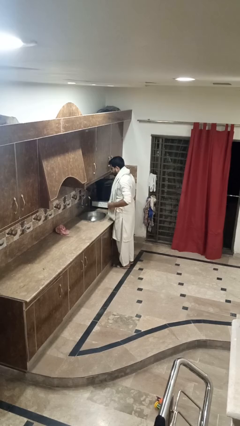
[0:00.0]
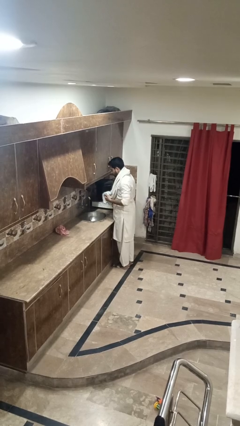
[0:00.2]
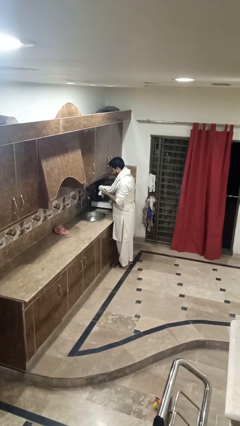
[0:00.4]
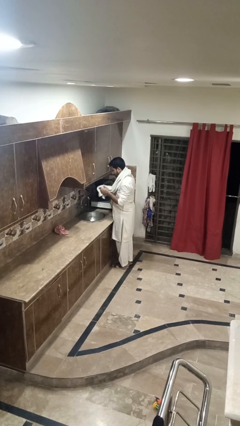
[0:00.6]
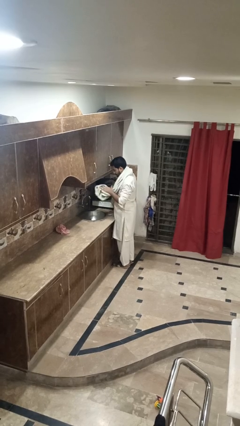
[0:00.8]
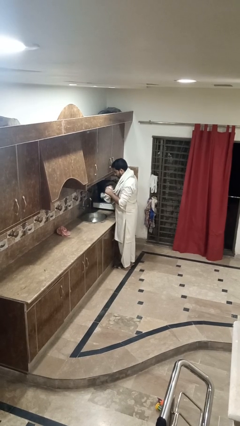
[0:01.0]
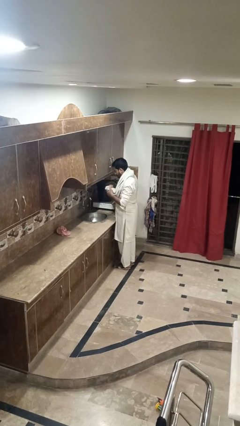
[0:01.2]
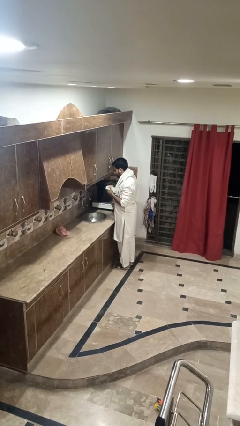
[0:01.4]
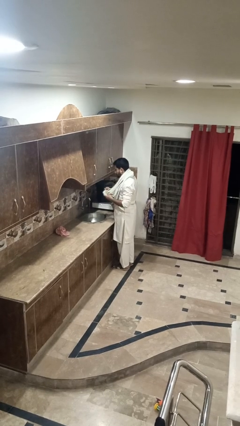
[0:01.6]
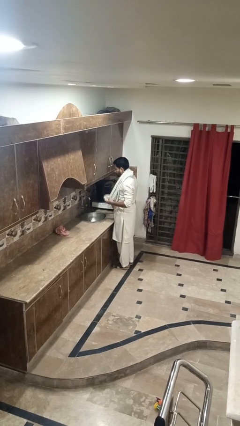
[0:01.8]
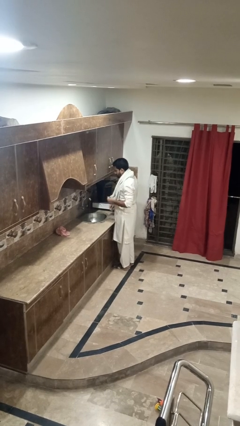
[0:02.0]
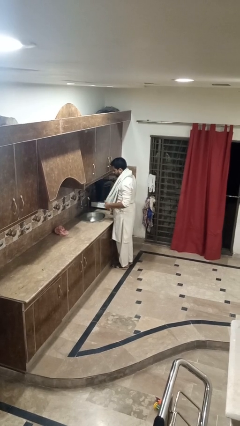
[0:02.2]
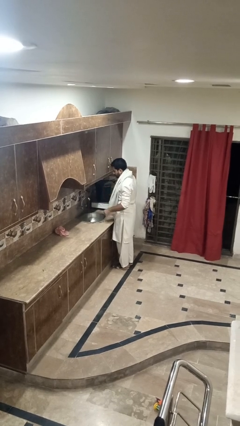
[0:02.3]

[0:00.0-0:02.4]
person dries hands with towel

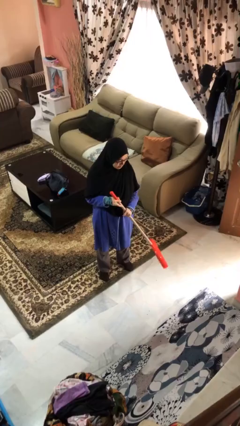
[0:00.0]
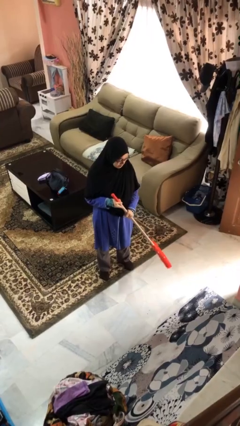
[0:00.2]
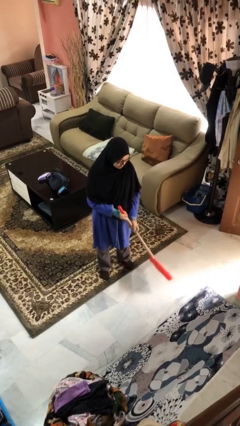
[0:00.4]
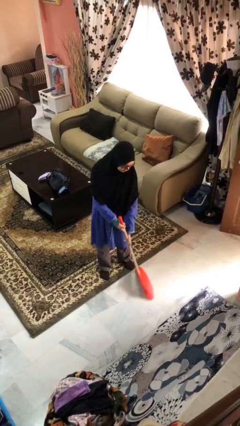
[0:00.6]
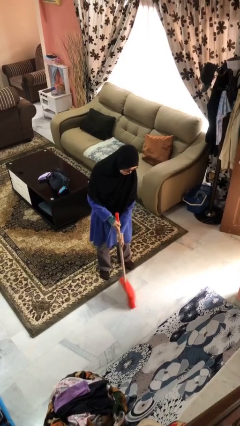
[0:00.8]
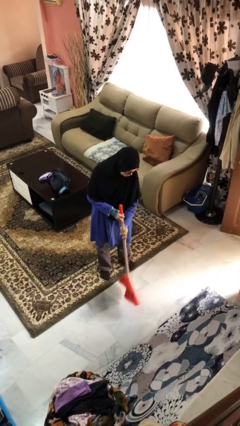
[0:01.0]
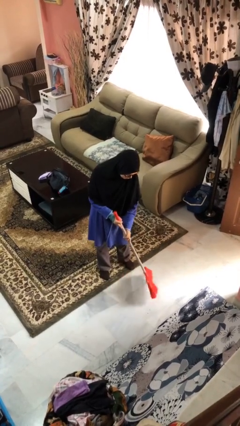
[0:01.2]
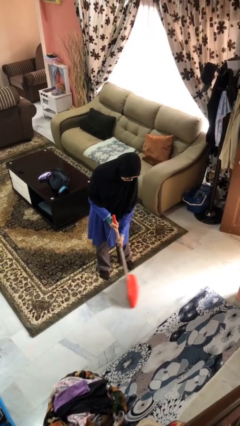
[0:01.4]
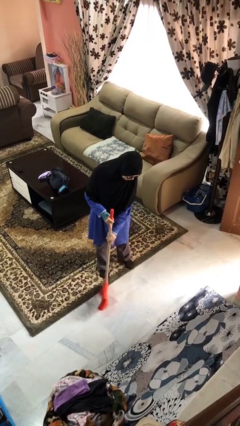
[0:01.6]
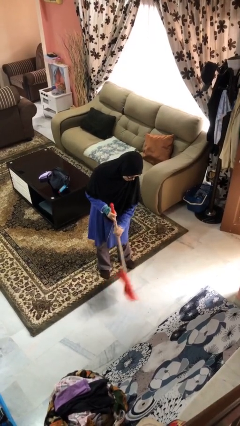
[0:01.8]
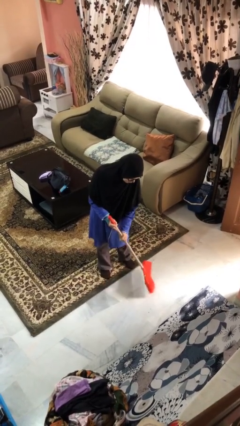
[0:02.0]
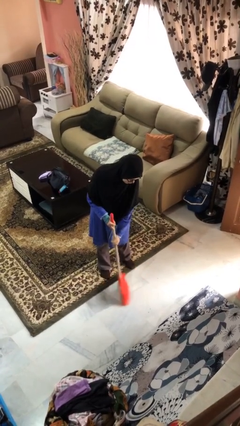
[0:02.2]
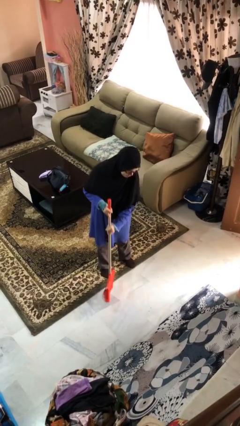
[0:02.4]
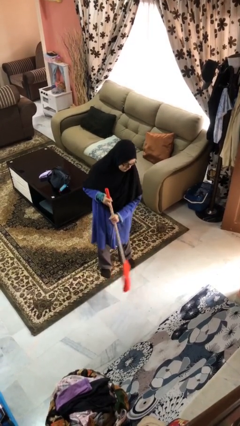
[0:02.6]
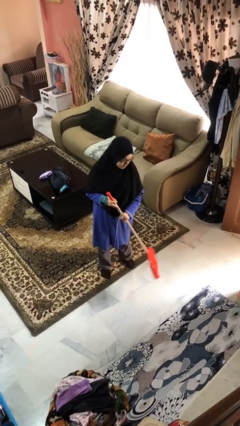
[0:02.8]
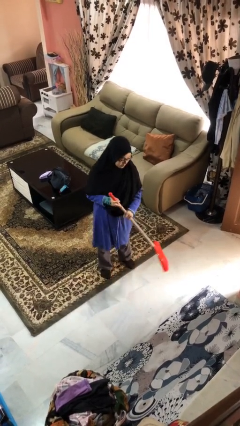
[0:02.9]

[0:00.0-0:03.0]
person sweeps floor

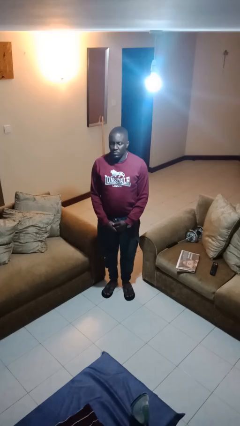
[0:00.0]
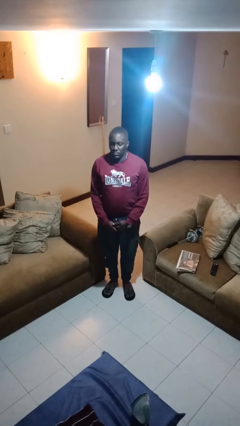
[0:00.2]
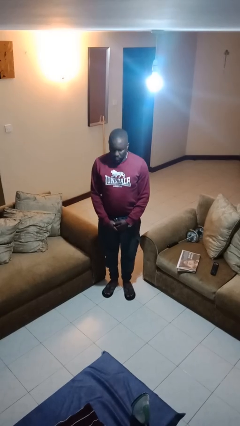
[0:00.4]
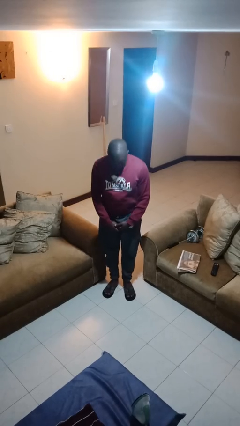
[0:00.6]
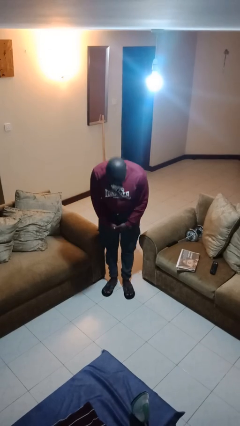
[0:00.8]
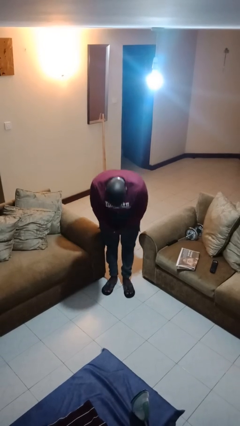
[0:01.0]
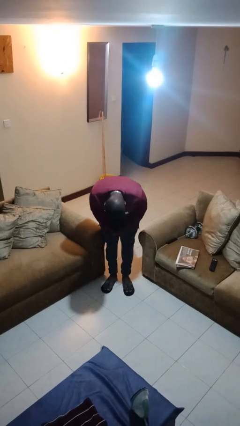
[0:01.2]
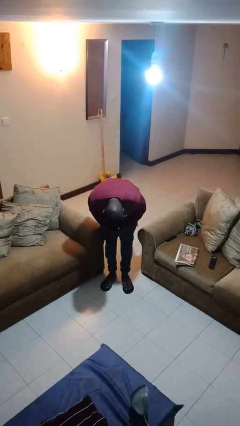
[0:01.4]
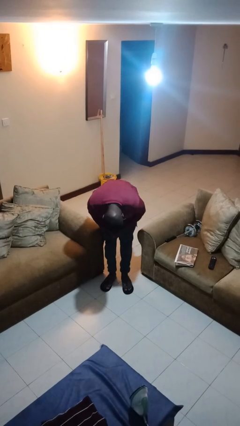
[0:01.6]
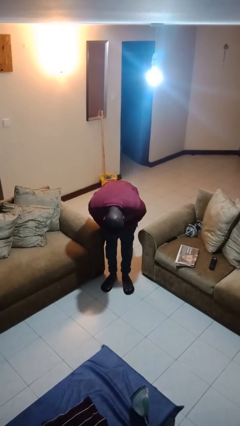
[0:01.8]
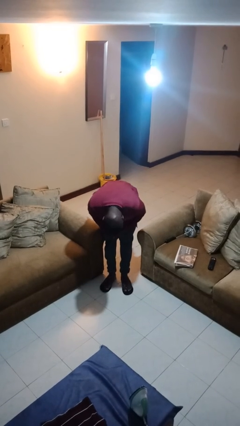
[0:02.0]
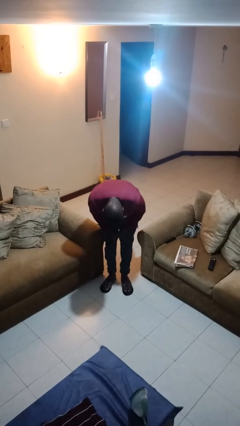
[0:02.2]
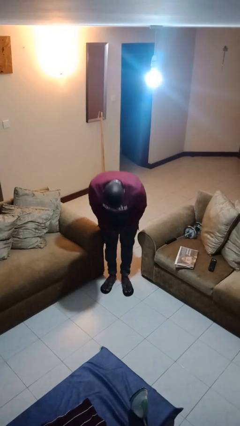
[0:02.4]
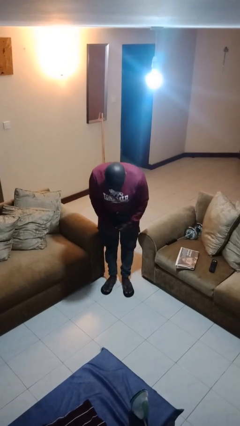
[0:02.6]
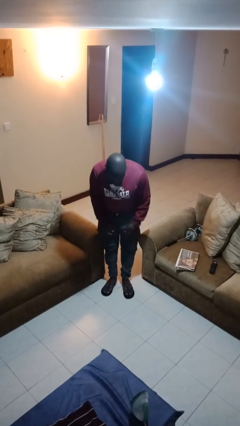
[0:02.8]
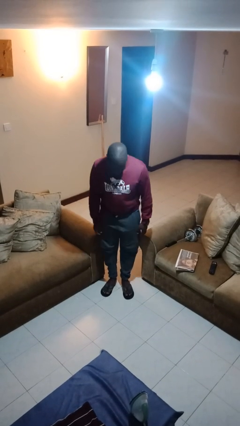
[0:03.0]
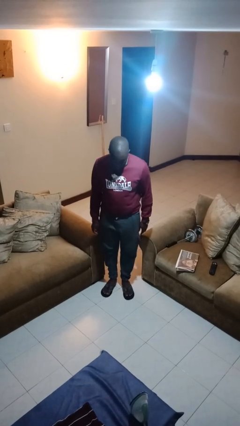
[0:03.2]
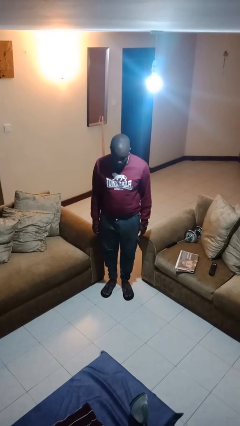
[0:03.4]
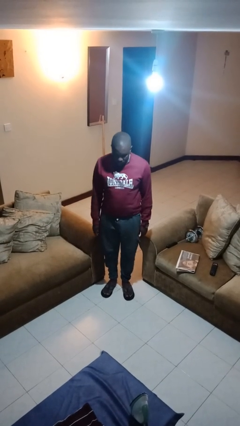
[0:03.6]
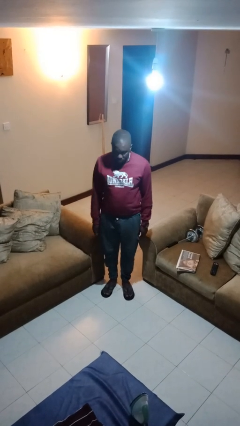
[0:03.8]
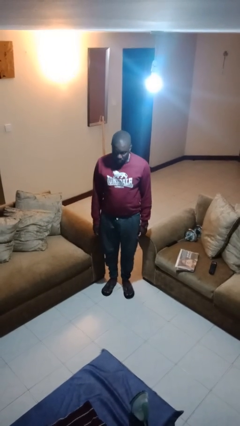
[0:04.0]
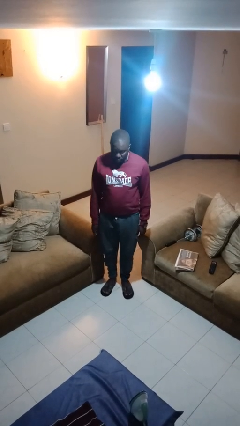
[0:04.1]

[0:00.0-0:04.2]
person bows

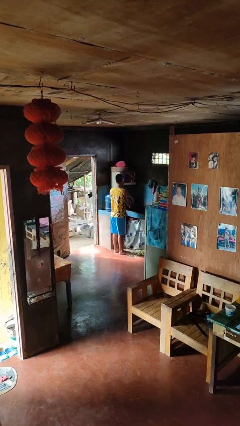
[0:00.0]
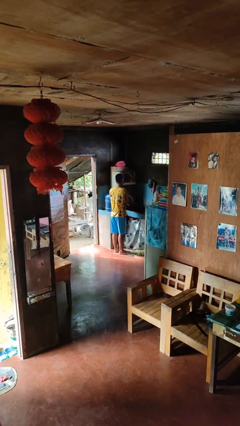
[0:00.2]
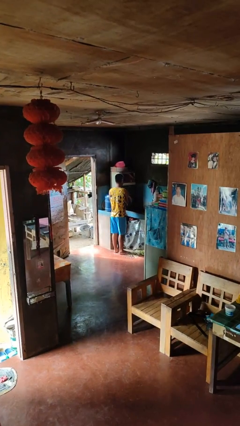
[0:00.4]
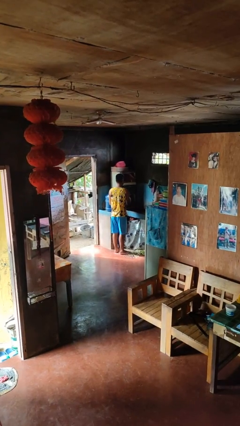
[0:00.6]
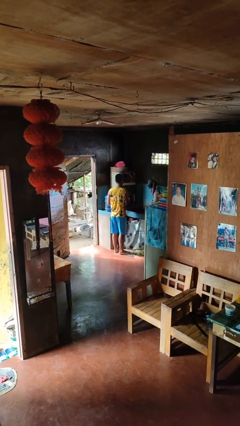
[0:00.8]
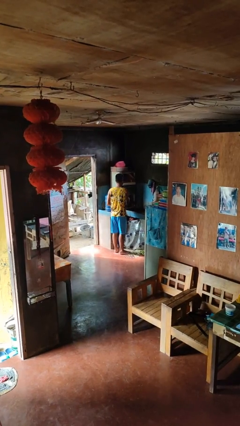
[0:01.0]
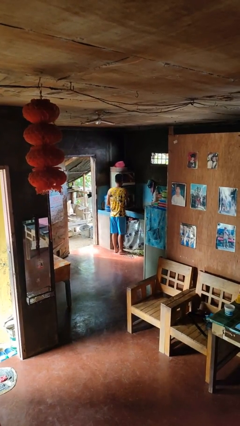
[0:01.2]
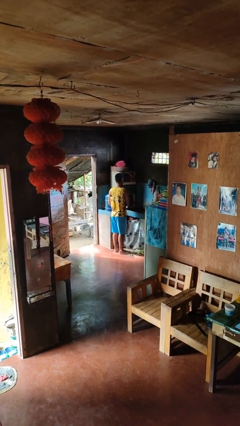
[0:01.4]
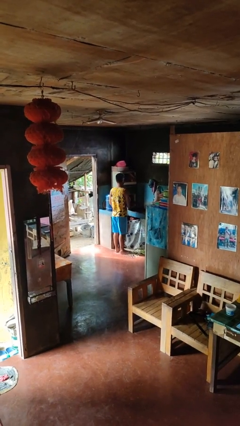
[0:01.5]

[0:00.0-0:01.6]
person closes dishwasher

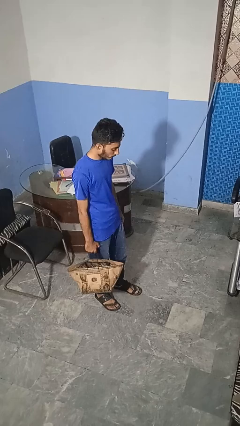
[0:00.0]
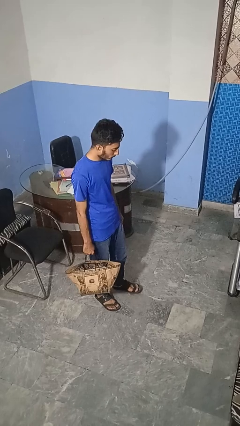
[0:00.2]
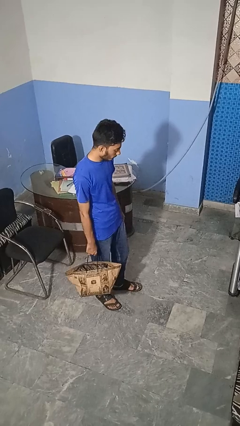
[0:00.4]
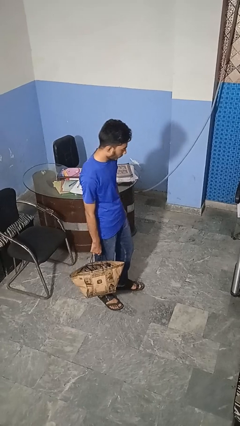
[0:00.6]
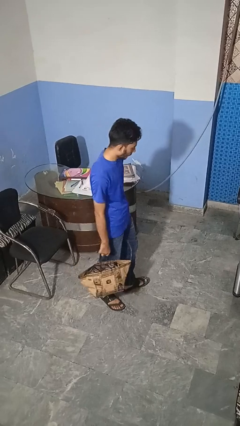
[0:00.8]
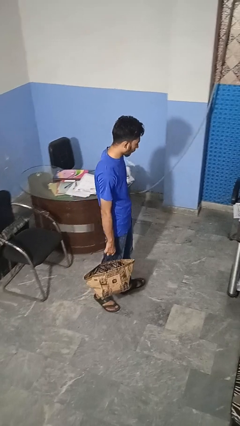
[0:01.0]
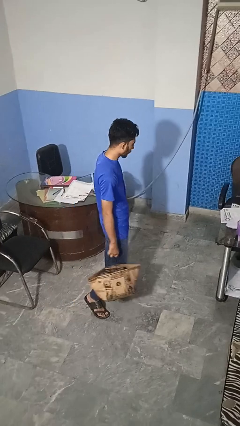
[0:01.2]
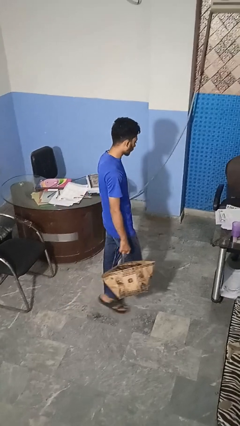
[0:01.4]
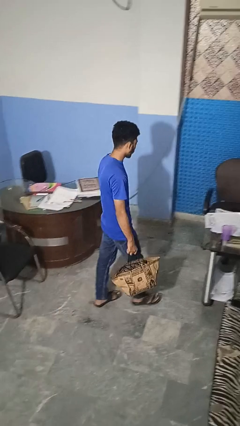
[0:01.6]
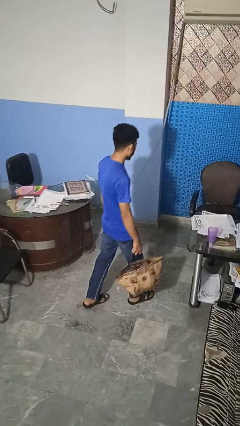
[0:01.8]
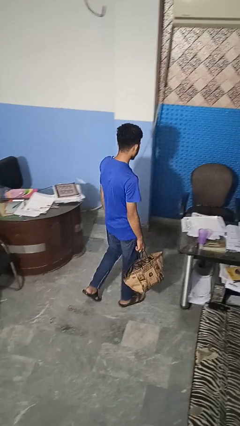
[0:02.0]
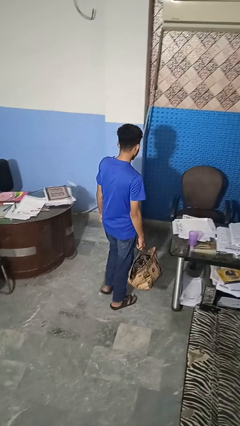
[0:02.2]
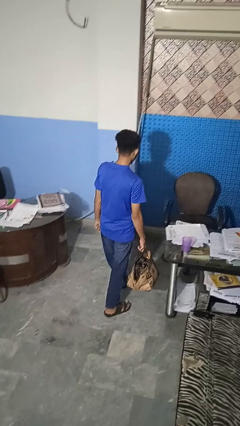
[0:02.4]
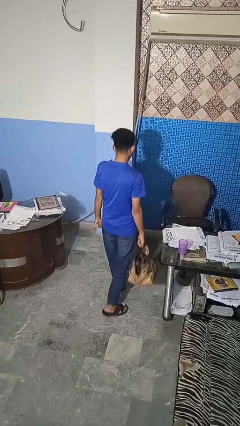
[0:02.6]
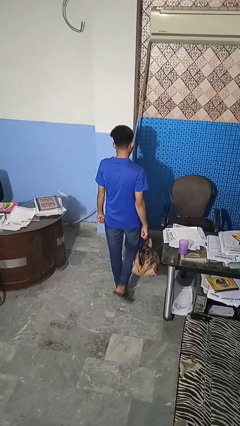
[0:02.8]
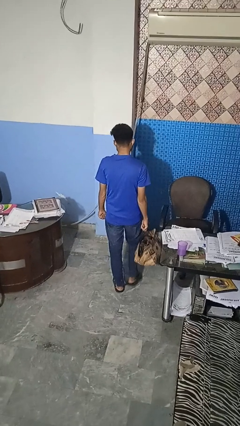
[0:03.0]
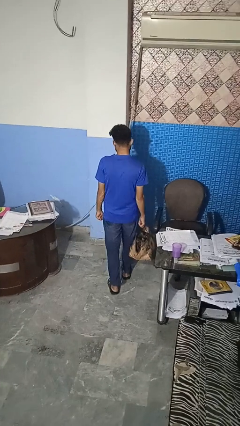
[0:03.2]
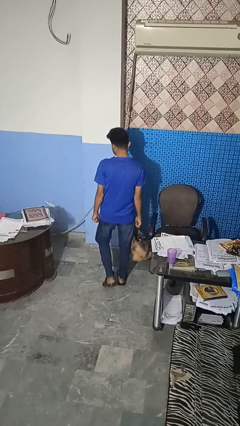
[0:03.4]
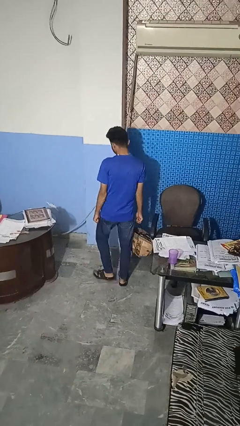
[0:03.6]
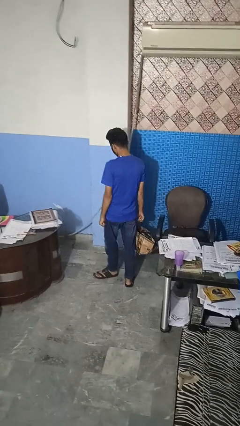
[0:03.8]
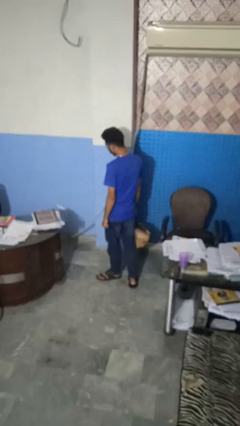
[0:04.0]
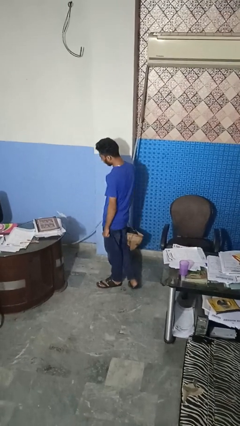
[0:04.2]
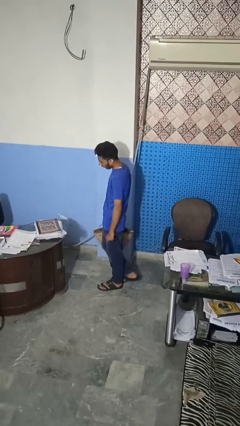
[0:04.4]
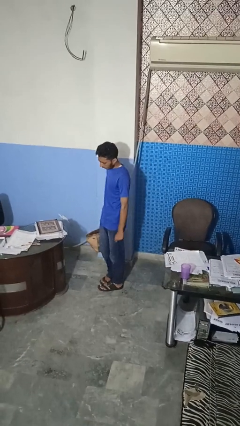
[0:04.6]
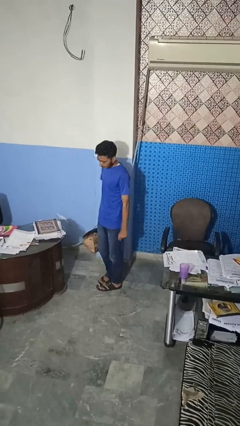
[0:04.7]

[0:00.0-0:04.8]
person carries groceries

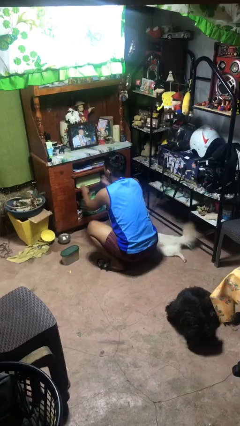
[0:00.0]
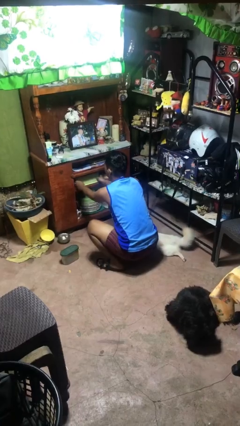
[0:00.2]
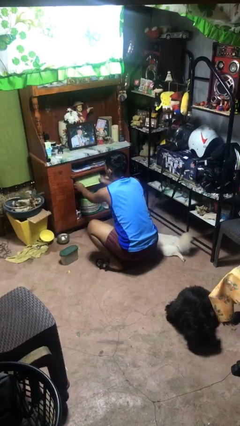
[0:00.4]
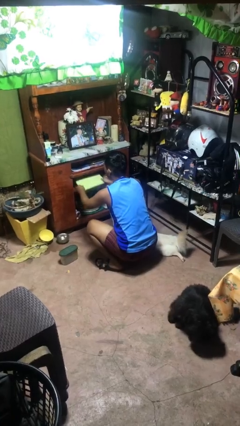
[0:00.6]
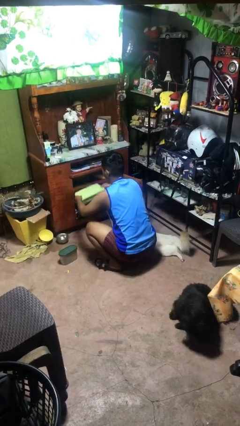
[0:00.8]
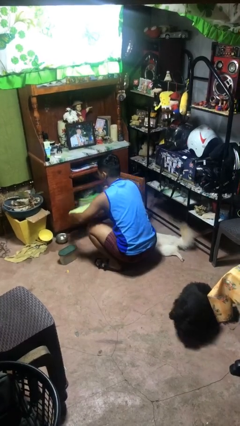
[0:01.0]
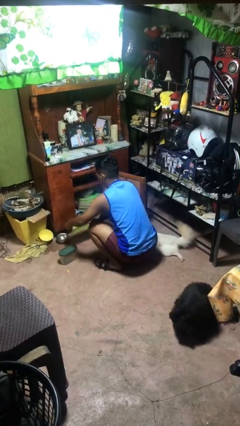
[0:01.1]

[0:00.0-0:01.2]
person takes object from cabinet

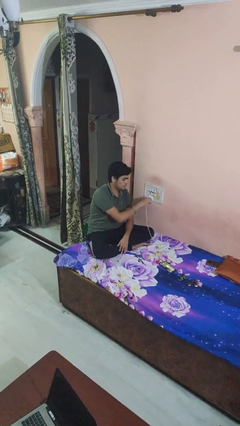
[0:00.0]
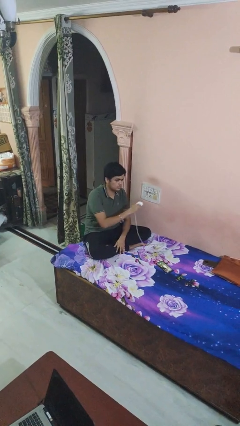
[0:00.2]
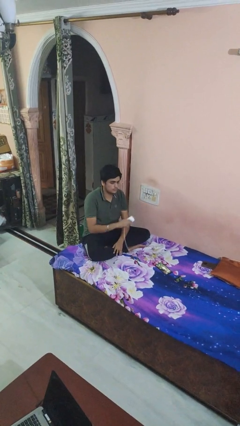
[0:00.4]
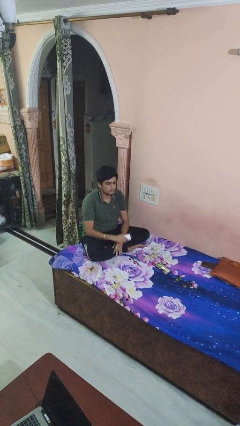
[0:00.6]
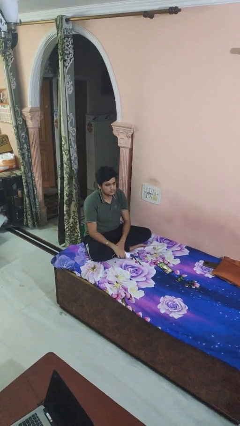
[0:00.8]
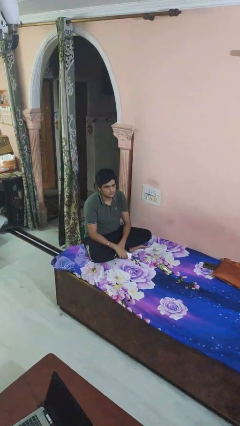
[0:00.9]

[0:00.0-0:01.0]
person unplugs from electrical socket
